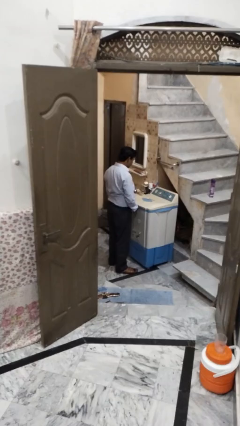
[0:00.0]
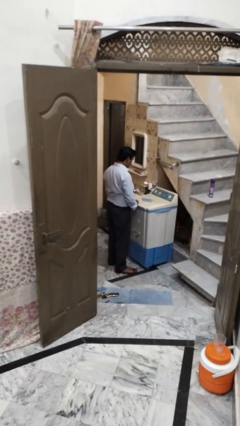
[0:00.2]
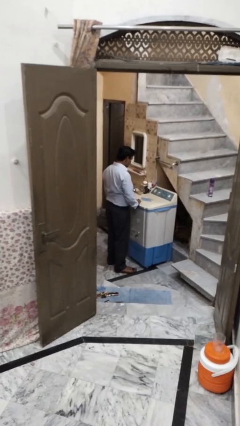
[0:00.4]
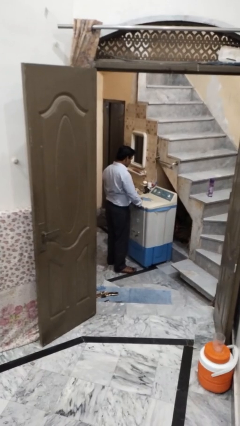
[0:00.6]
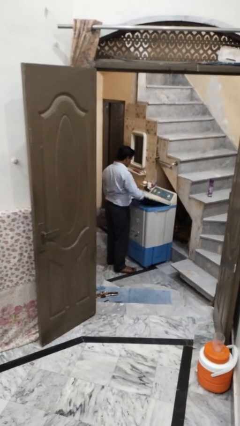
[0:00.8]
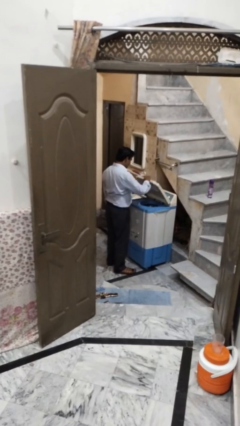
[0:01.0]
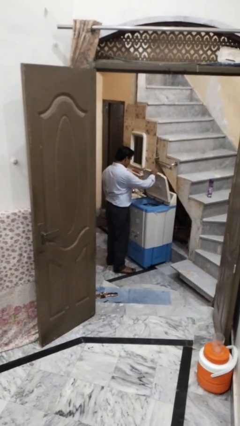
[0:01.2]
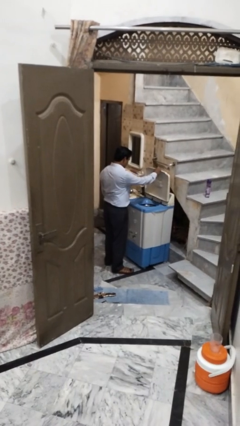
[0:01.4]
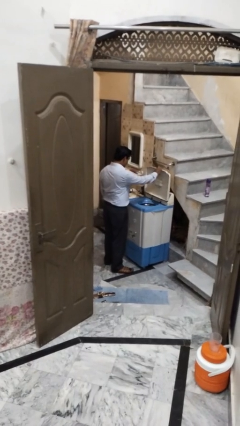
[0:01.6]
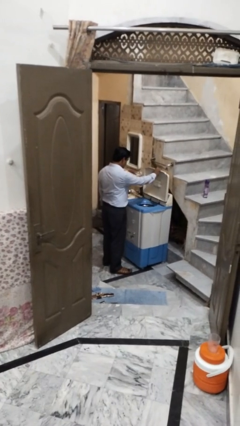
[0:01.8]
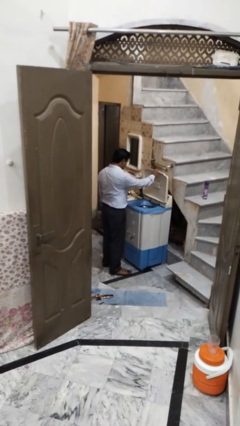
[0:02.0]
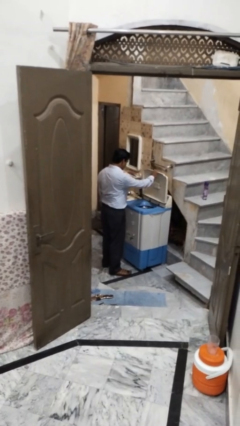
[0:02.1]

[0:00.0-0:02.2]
person opens clothes washer

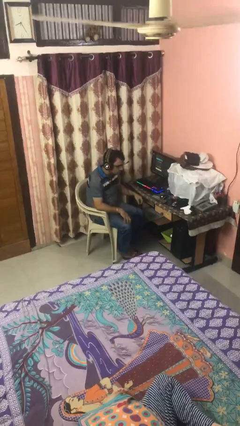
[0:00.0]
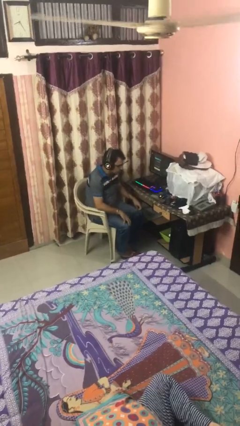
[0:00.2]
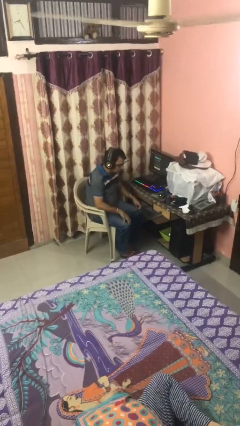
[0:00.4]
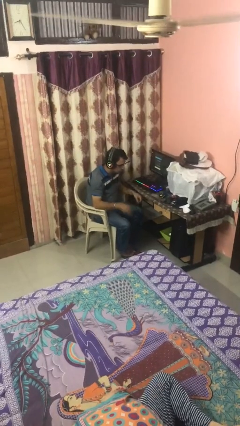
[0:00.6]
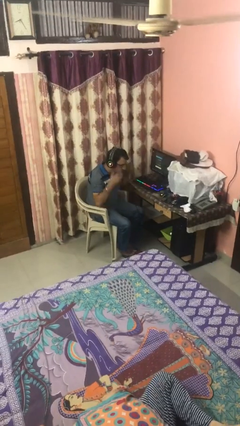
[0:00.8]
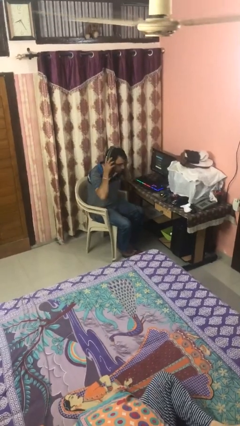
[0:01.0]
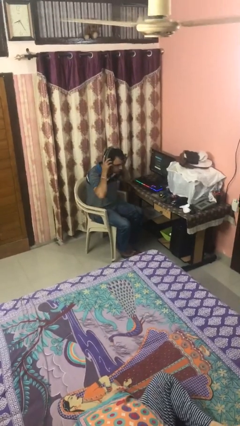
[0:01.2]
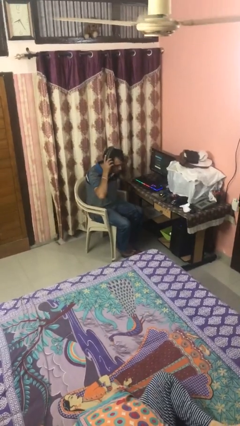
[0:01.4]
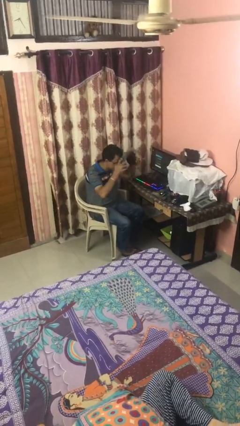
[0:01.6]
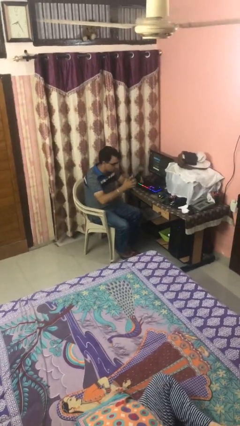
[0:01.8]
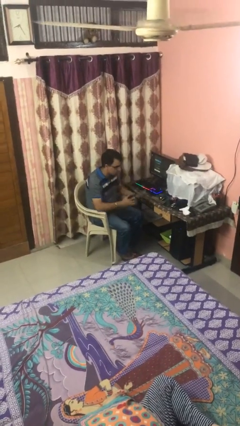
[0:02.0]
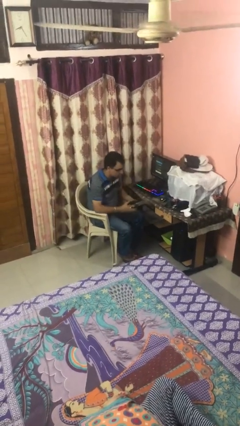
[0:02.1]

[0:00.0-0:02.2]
person takes off headphones

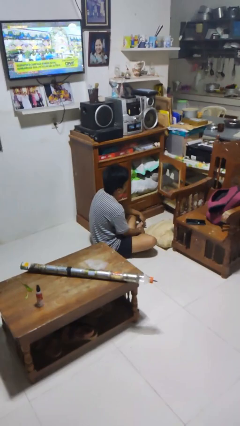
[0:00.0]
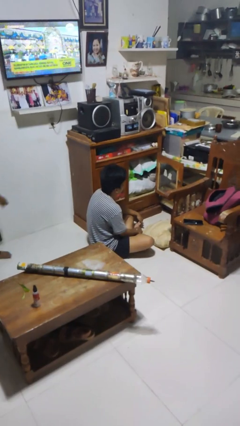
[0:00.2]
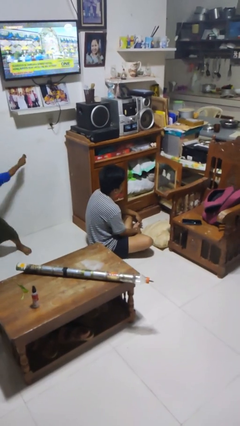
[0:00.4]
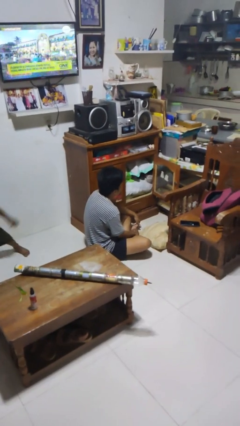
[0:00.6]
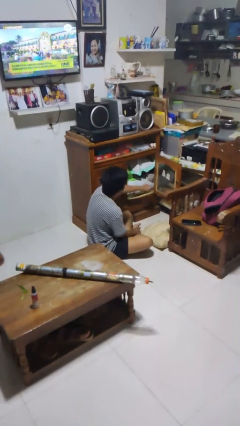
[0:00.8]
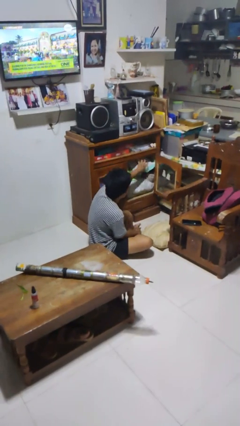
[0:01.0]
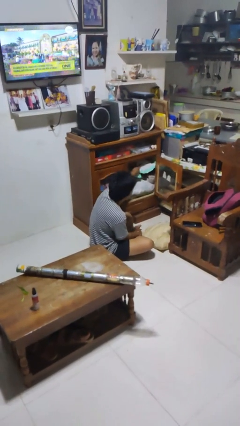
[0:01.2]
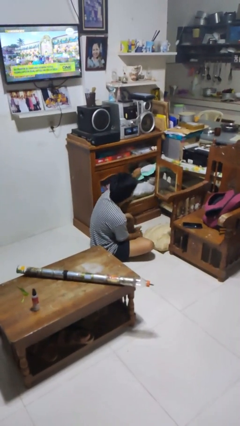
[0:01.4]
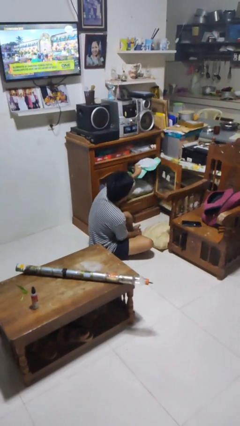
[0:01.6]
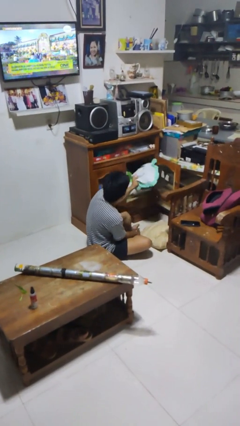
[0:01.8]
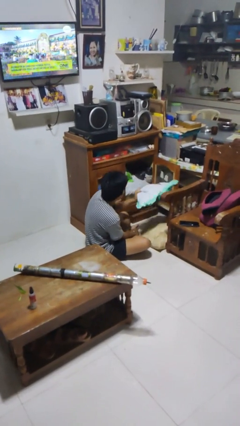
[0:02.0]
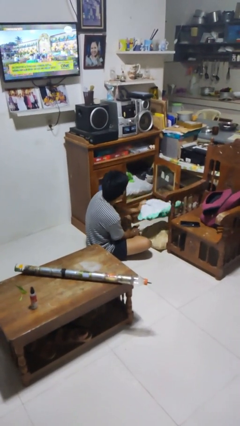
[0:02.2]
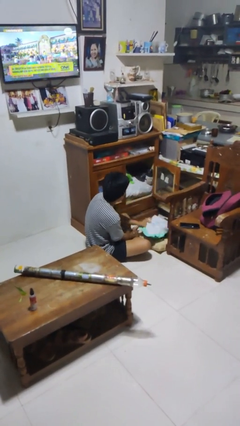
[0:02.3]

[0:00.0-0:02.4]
person puts clothes into dresser

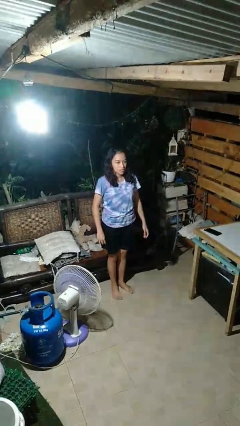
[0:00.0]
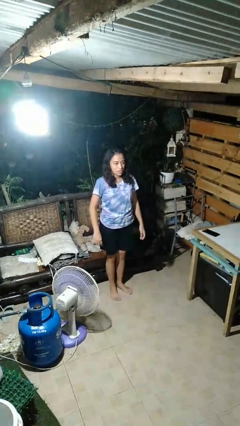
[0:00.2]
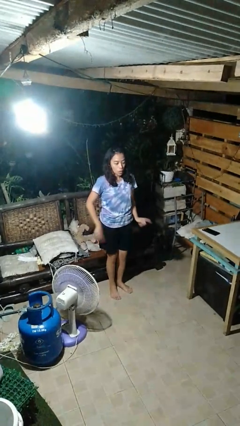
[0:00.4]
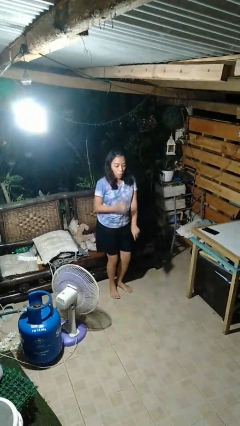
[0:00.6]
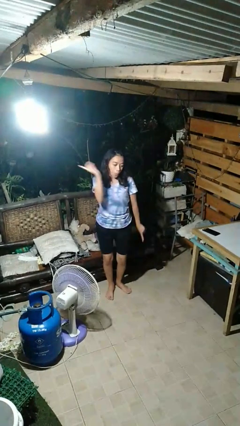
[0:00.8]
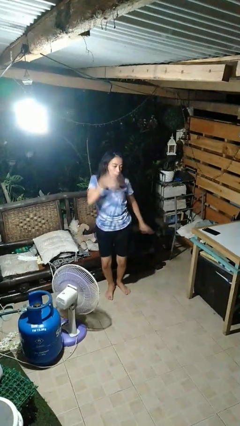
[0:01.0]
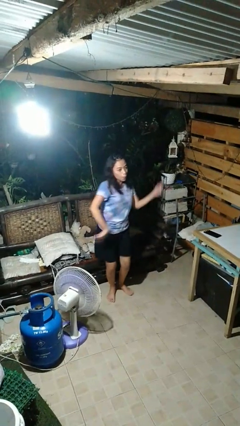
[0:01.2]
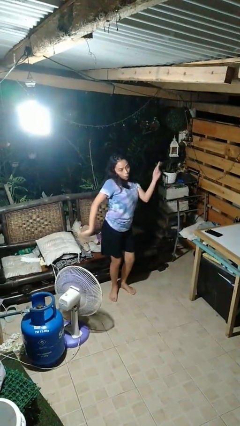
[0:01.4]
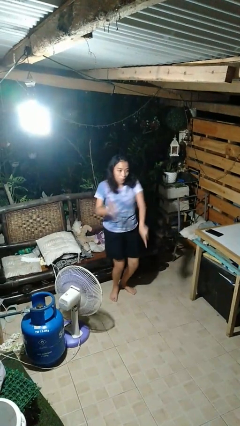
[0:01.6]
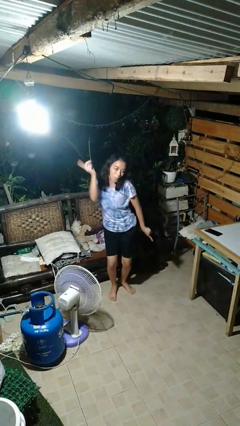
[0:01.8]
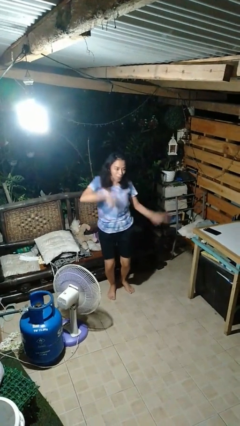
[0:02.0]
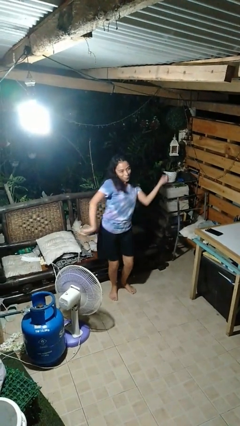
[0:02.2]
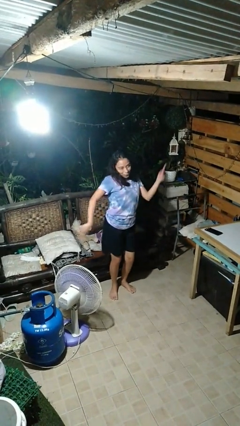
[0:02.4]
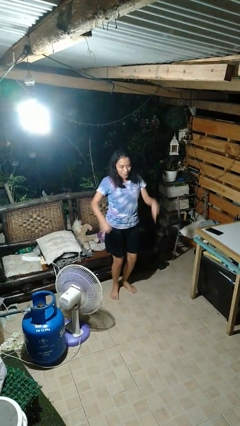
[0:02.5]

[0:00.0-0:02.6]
person dances in place

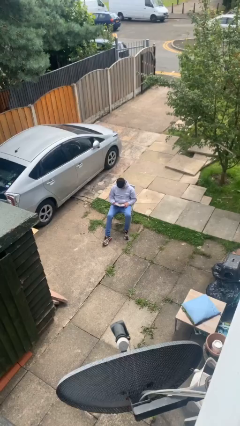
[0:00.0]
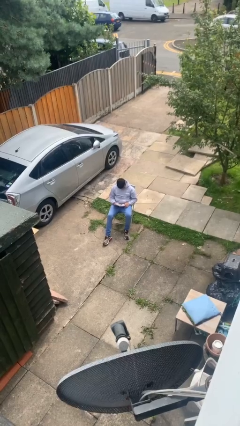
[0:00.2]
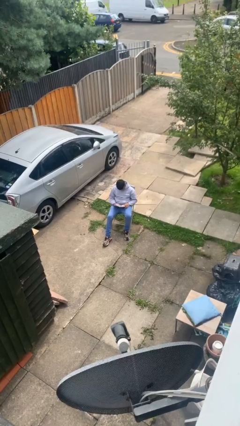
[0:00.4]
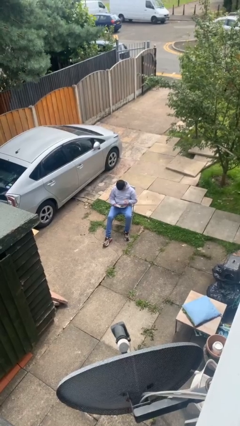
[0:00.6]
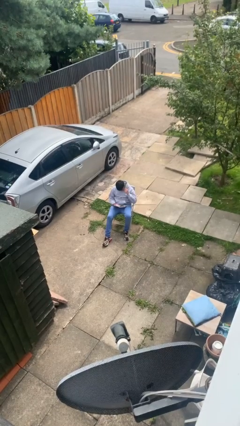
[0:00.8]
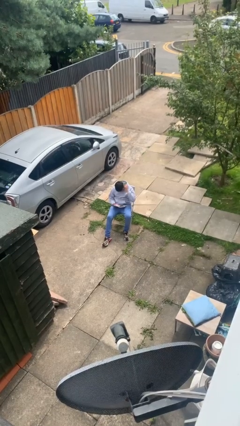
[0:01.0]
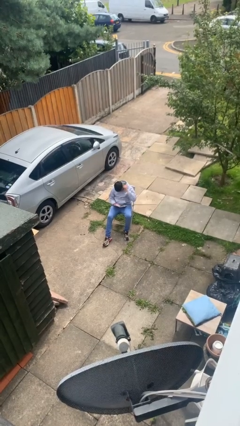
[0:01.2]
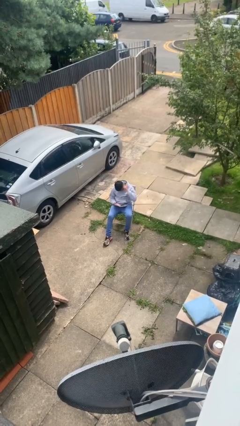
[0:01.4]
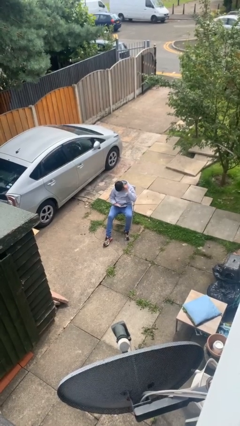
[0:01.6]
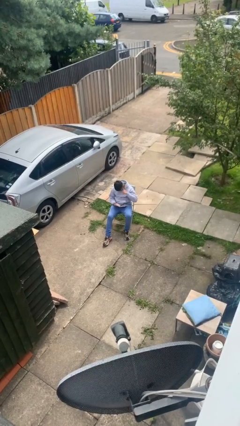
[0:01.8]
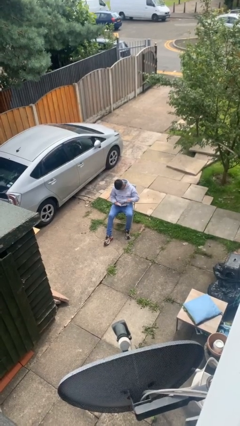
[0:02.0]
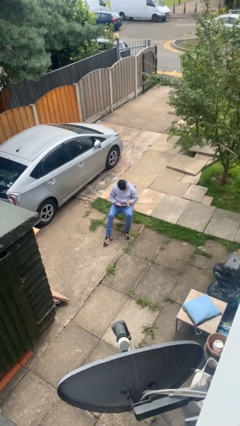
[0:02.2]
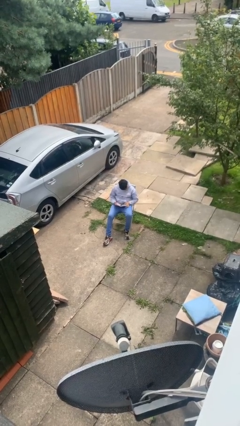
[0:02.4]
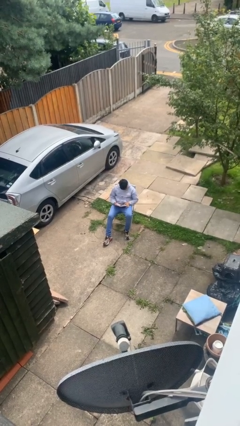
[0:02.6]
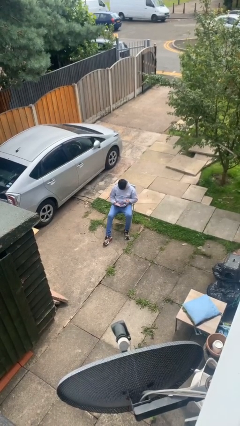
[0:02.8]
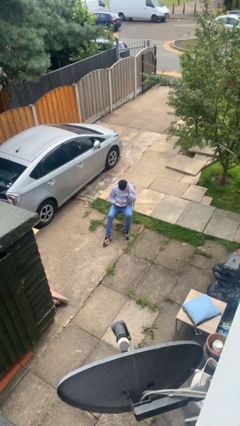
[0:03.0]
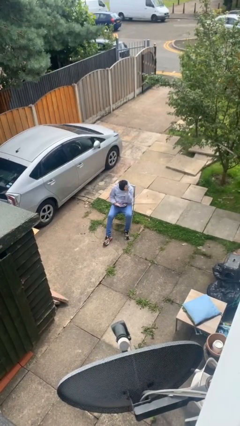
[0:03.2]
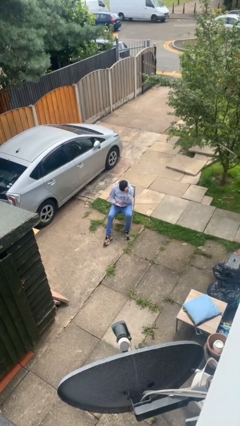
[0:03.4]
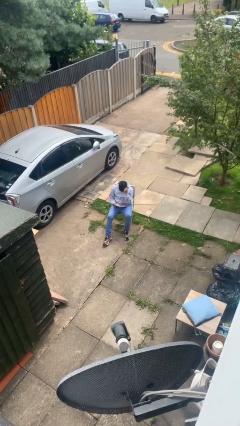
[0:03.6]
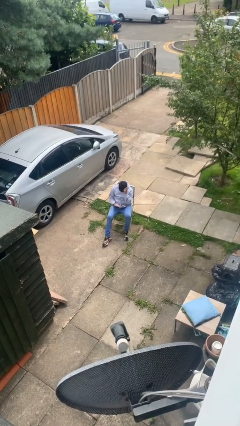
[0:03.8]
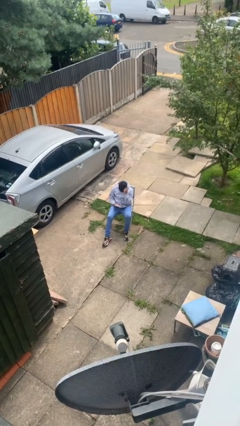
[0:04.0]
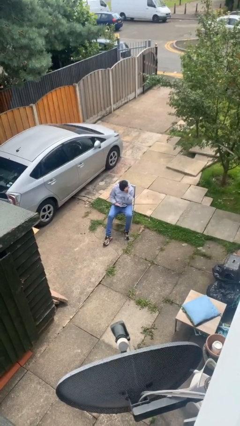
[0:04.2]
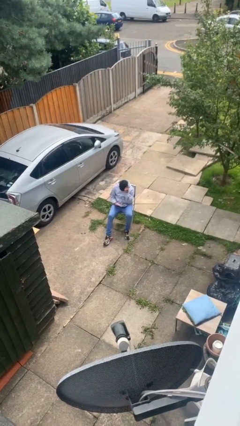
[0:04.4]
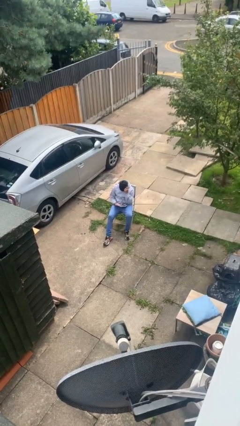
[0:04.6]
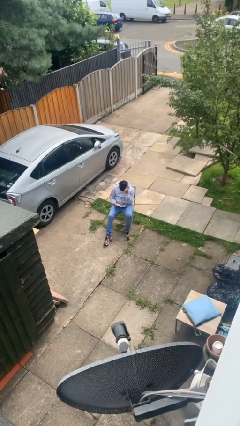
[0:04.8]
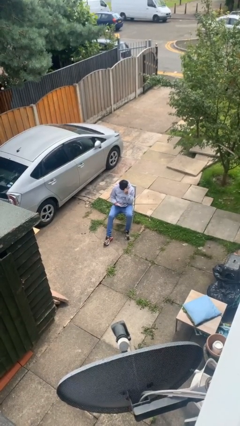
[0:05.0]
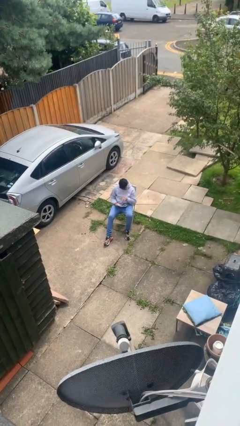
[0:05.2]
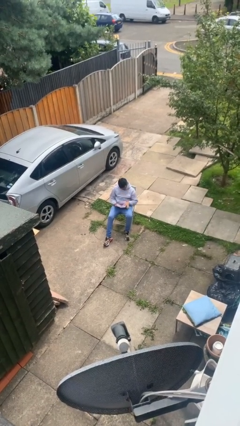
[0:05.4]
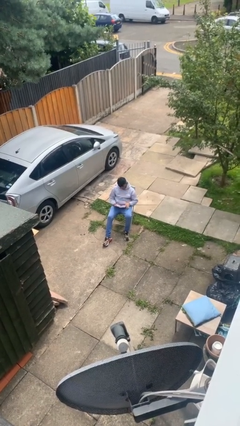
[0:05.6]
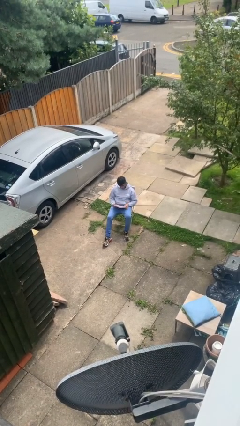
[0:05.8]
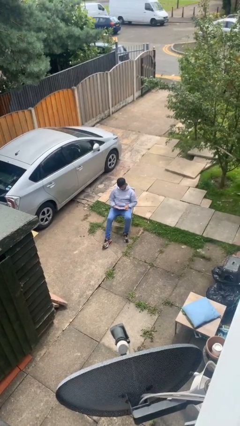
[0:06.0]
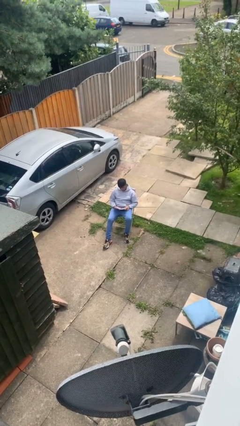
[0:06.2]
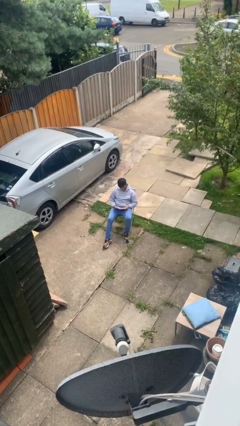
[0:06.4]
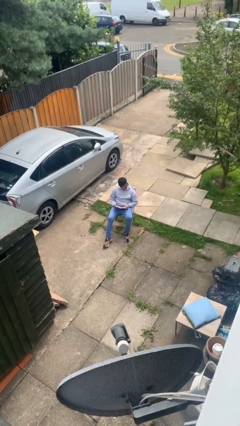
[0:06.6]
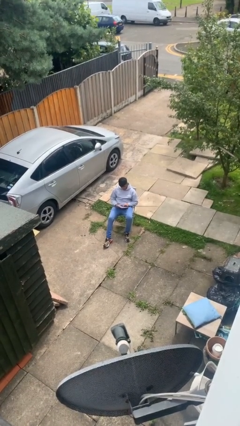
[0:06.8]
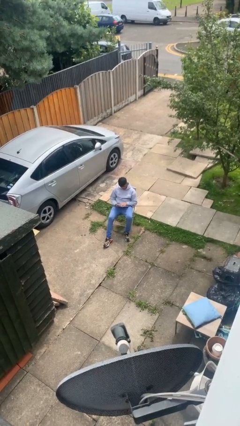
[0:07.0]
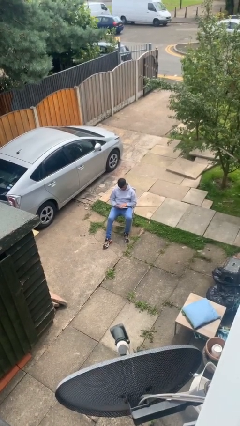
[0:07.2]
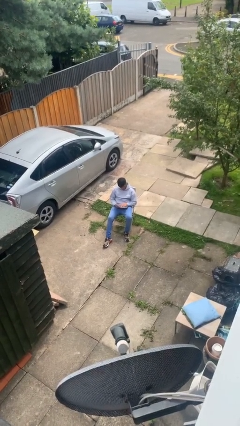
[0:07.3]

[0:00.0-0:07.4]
person reads document

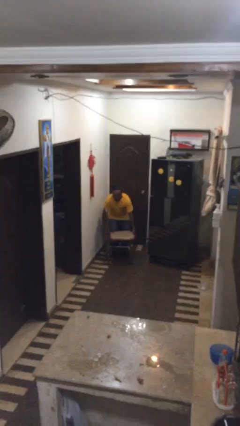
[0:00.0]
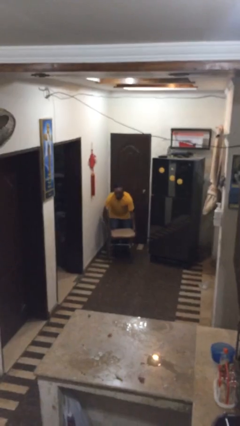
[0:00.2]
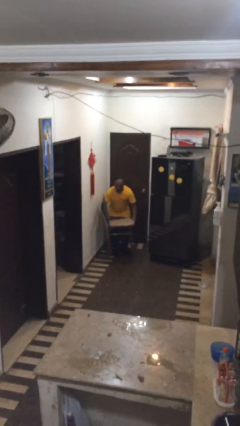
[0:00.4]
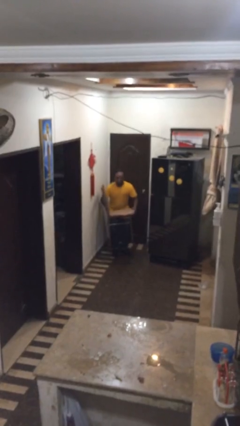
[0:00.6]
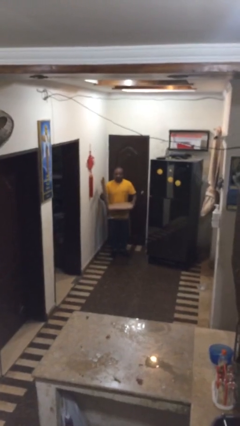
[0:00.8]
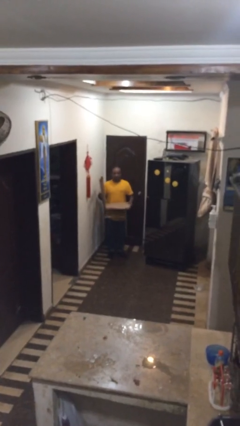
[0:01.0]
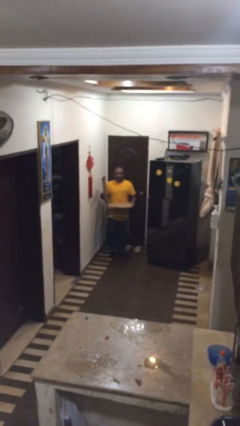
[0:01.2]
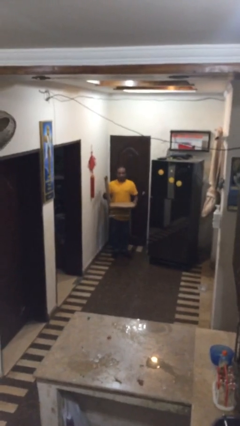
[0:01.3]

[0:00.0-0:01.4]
person picks up object from floor
